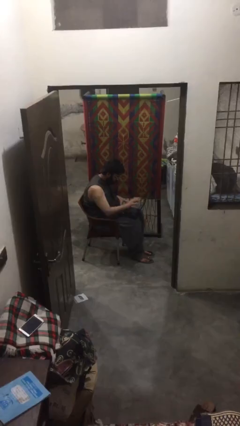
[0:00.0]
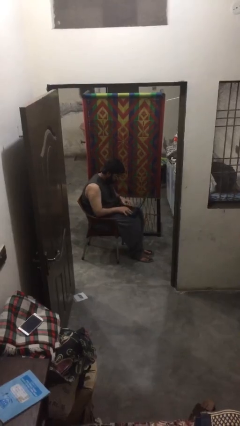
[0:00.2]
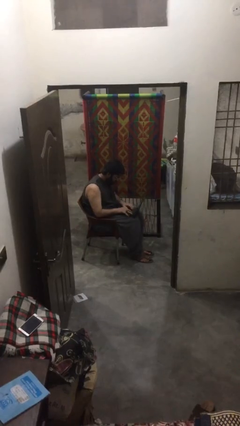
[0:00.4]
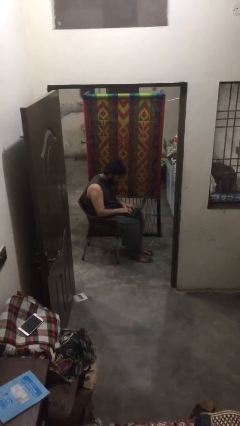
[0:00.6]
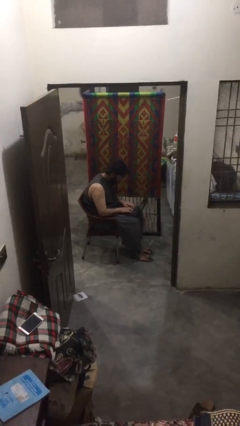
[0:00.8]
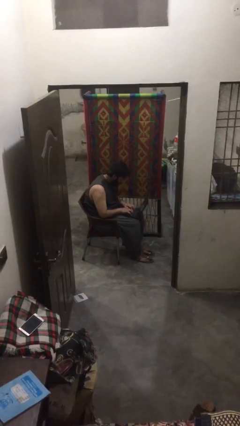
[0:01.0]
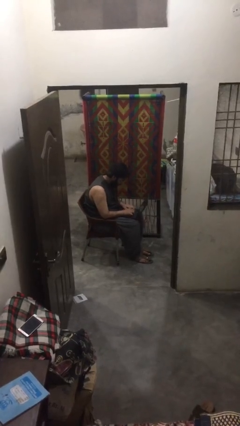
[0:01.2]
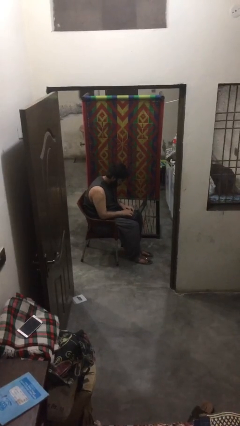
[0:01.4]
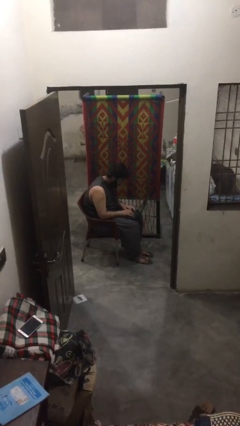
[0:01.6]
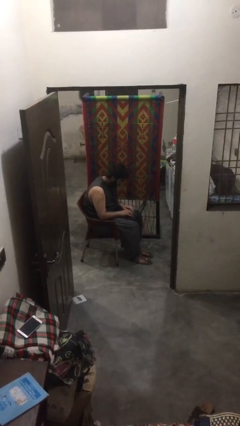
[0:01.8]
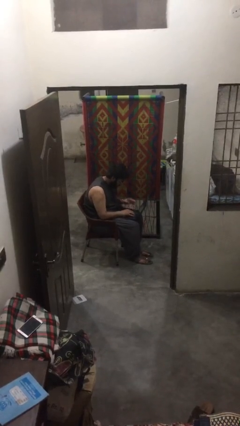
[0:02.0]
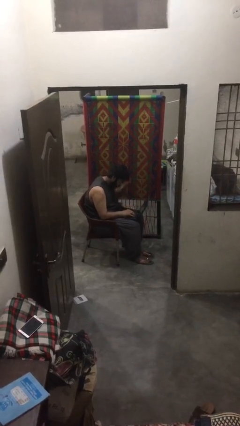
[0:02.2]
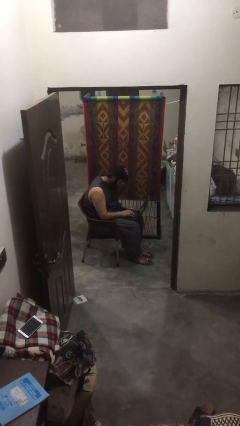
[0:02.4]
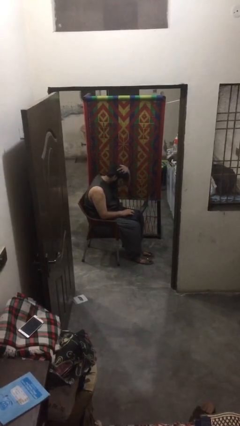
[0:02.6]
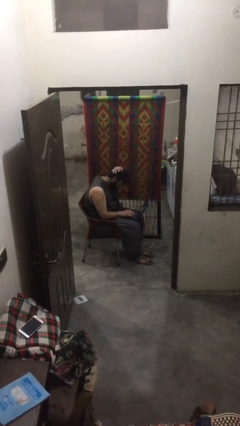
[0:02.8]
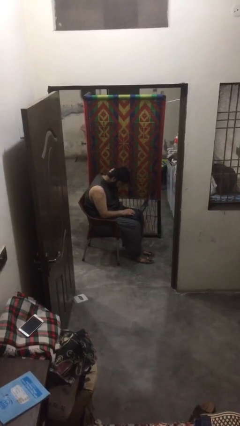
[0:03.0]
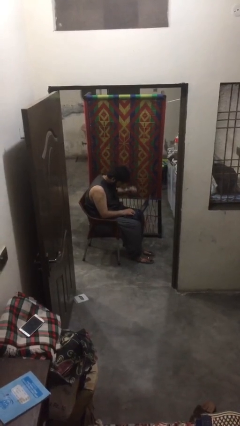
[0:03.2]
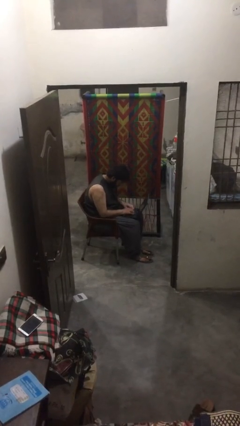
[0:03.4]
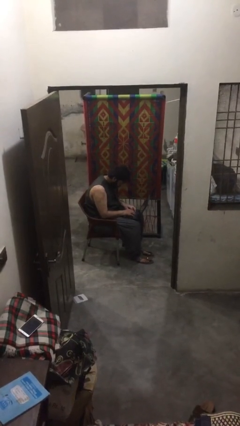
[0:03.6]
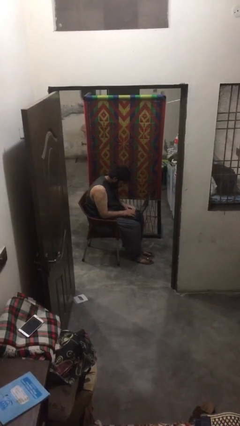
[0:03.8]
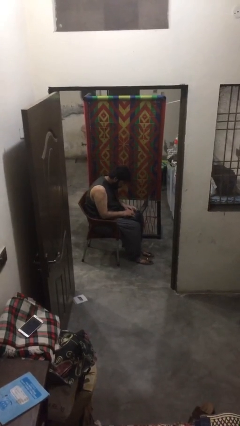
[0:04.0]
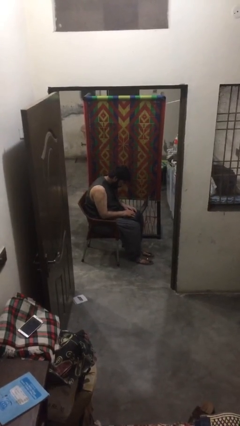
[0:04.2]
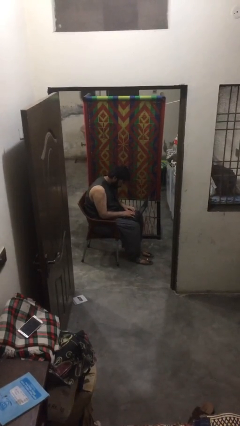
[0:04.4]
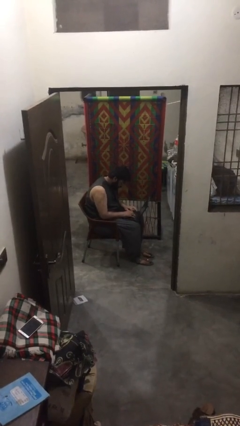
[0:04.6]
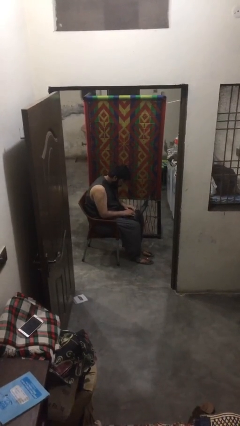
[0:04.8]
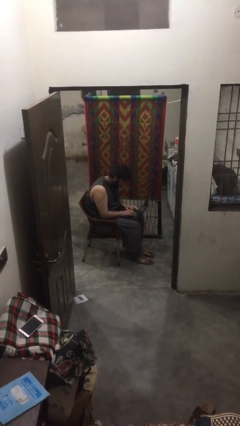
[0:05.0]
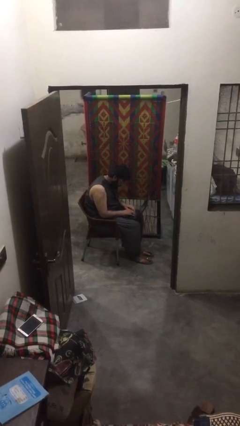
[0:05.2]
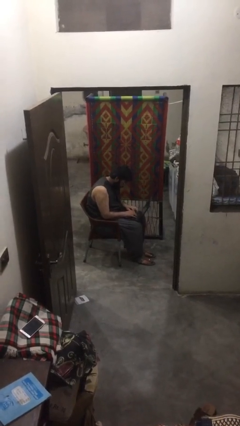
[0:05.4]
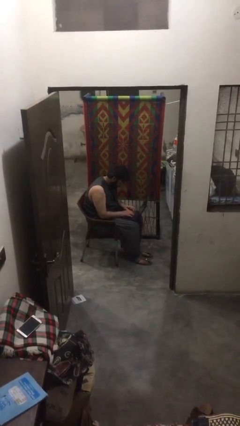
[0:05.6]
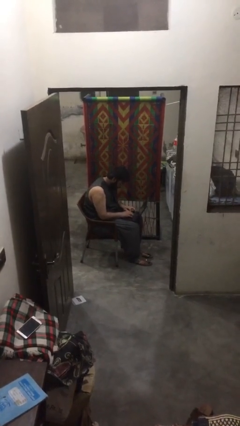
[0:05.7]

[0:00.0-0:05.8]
person interacts with laptop

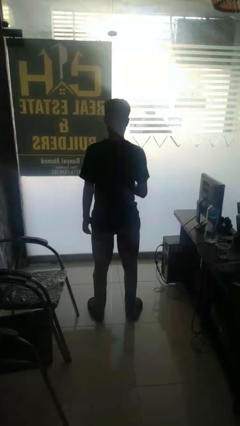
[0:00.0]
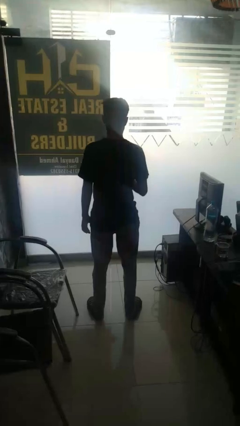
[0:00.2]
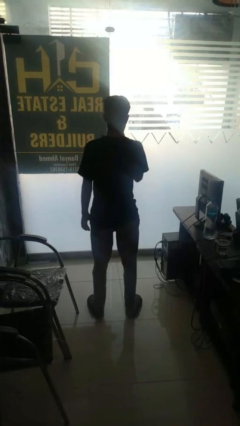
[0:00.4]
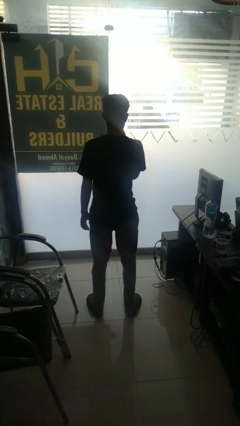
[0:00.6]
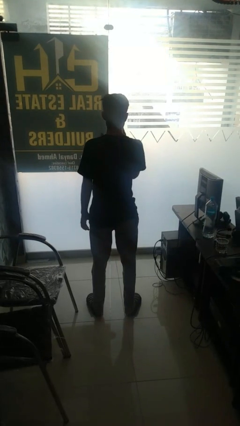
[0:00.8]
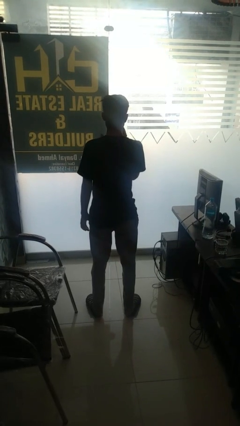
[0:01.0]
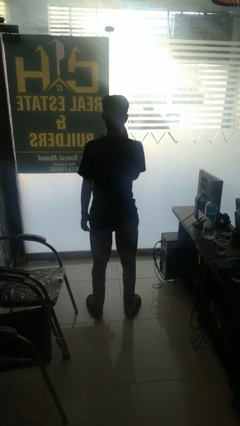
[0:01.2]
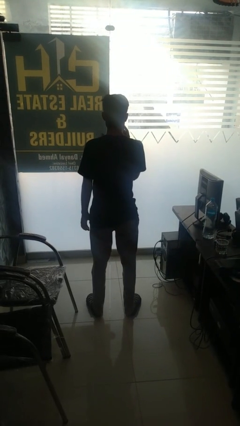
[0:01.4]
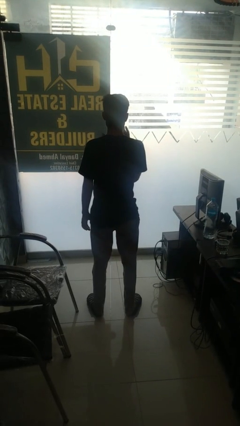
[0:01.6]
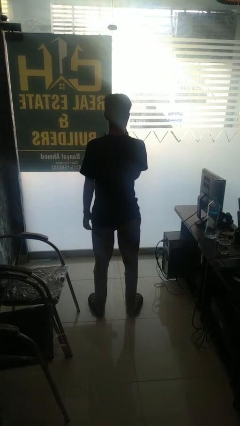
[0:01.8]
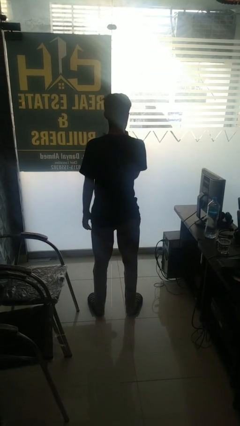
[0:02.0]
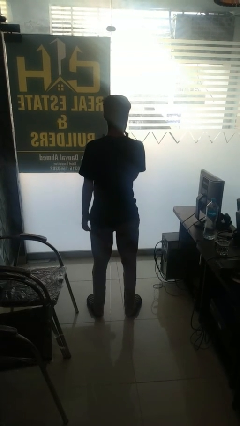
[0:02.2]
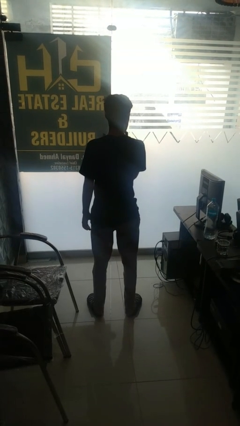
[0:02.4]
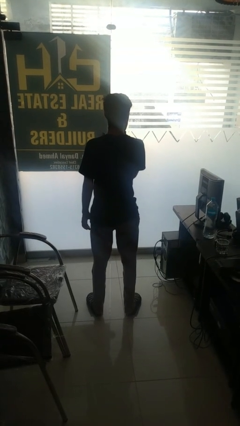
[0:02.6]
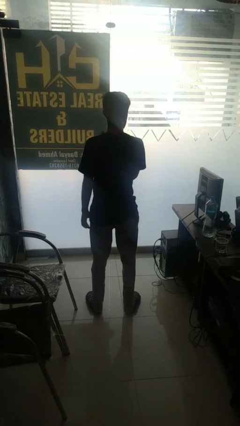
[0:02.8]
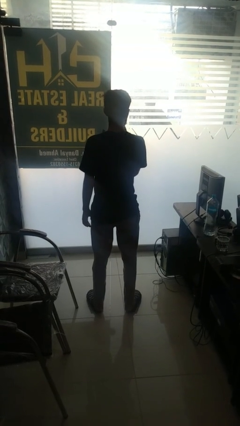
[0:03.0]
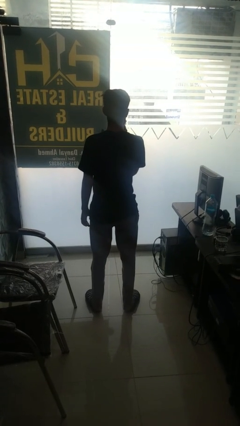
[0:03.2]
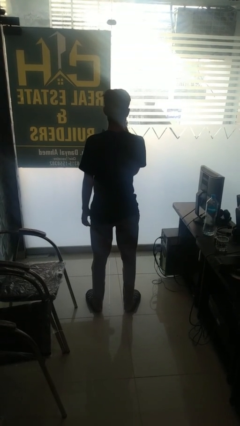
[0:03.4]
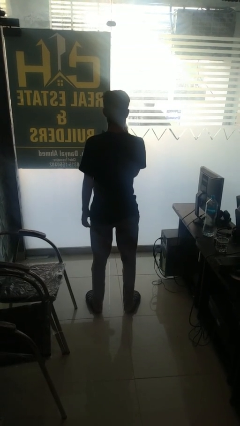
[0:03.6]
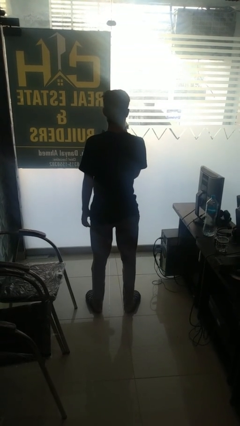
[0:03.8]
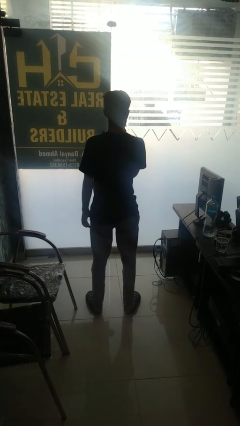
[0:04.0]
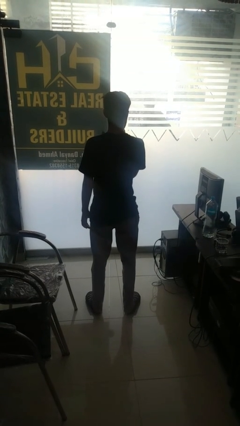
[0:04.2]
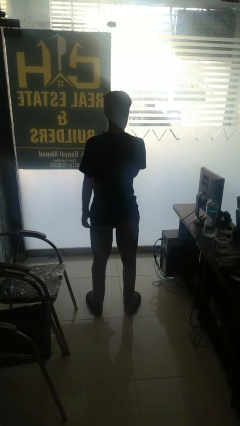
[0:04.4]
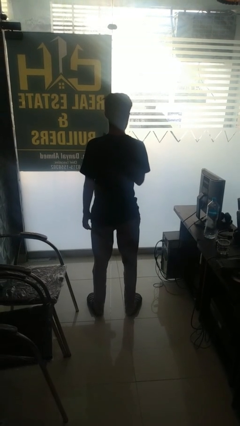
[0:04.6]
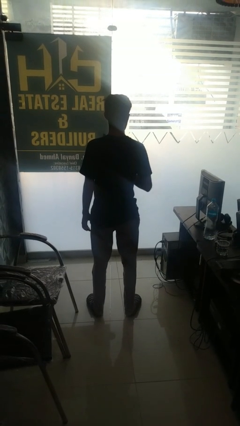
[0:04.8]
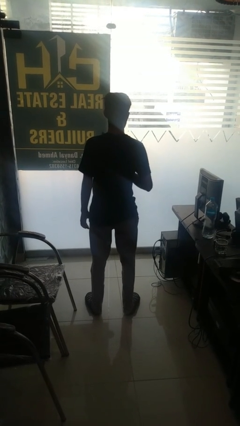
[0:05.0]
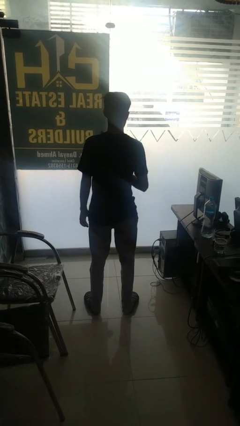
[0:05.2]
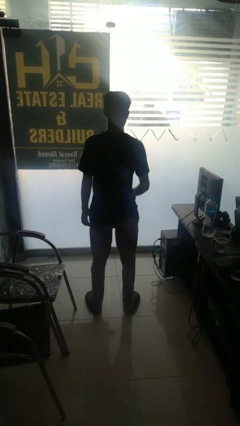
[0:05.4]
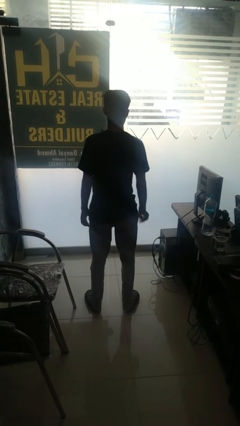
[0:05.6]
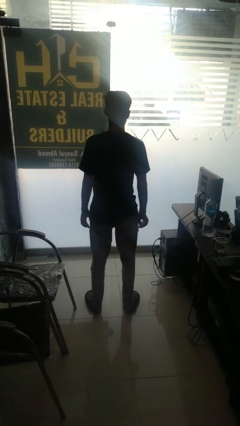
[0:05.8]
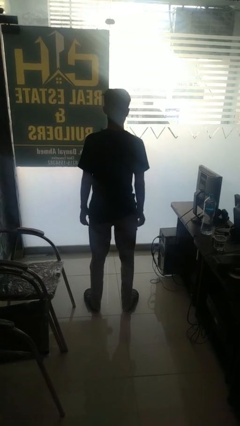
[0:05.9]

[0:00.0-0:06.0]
person wipes mouth with napkin

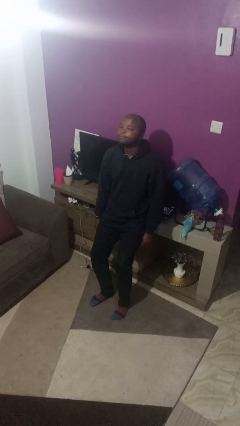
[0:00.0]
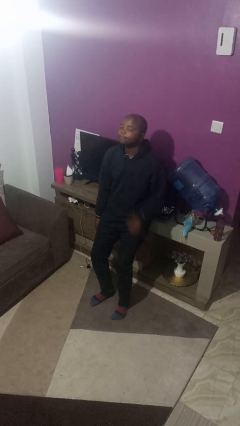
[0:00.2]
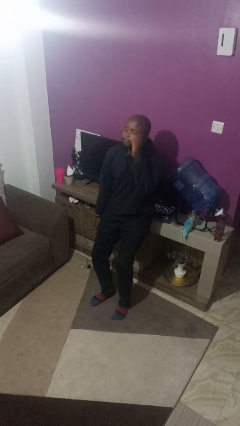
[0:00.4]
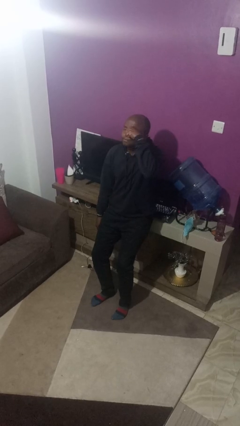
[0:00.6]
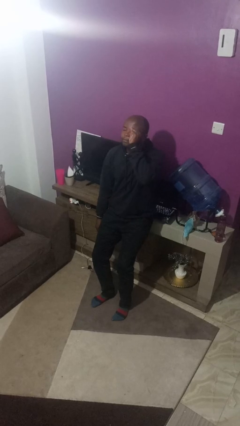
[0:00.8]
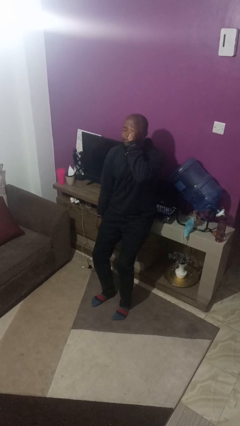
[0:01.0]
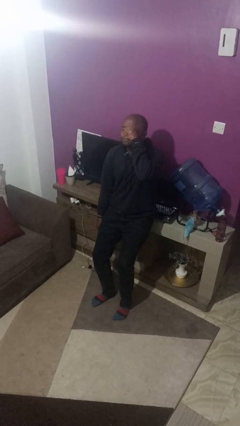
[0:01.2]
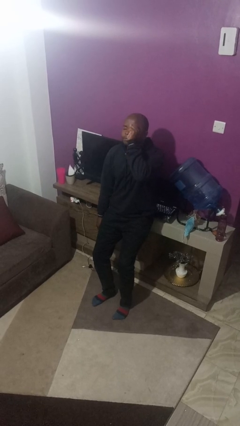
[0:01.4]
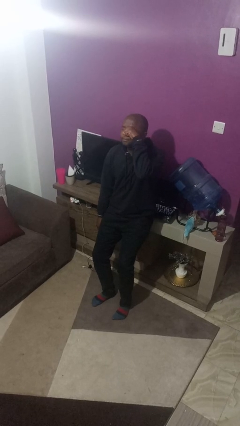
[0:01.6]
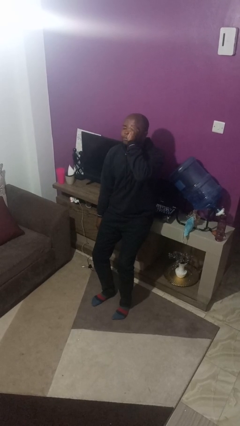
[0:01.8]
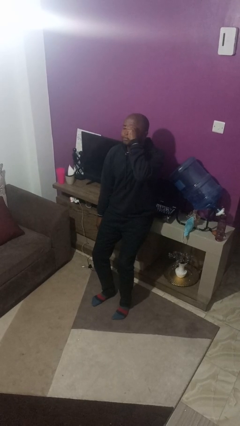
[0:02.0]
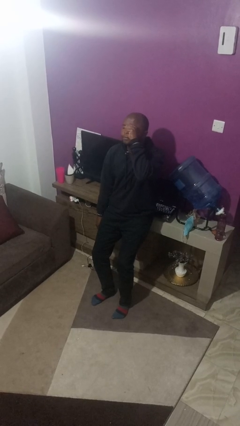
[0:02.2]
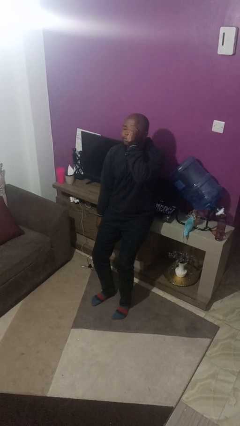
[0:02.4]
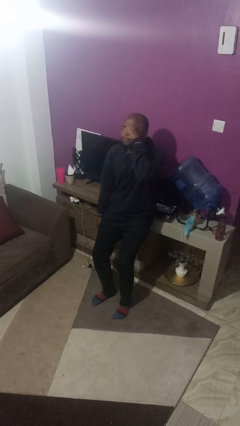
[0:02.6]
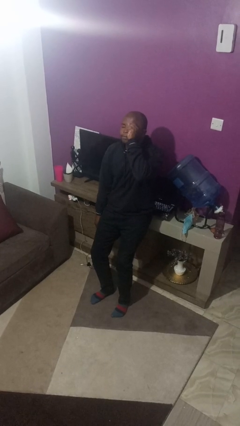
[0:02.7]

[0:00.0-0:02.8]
person rubs eyes

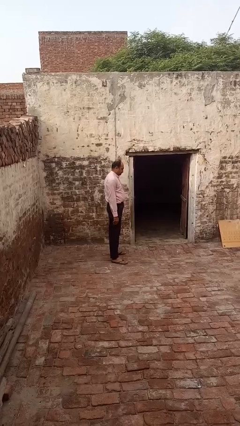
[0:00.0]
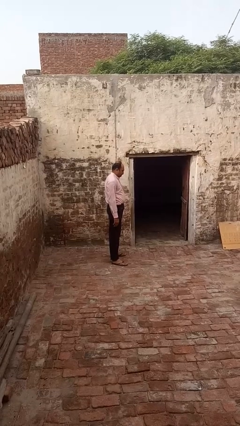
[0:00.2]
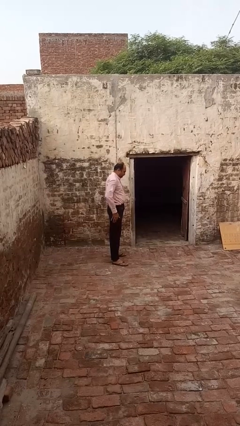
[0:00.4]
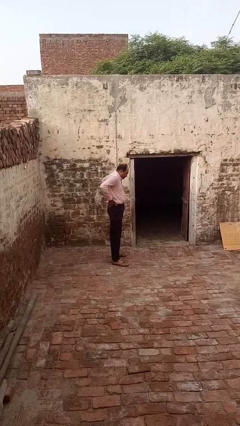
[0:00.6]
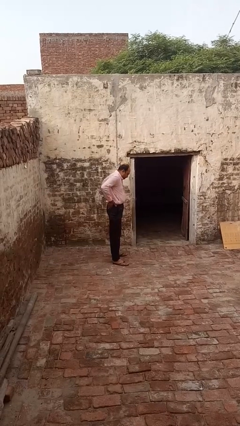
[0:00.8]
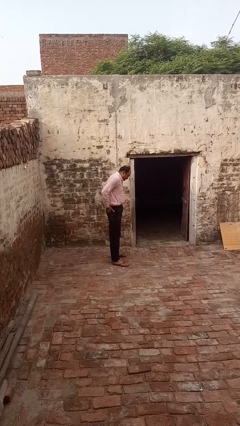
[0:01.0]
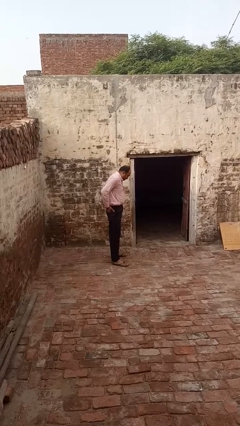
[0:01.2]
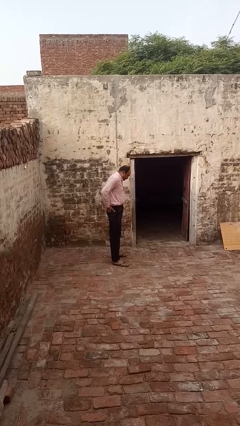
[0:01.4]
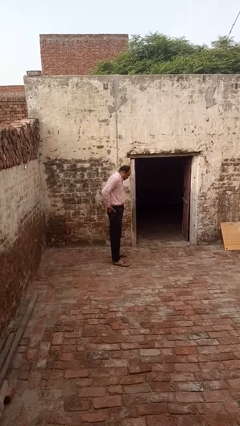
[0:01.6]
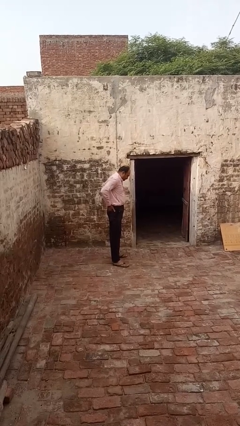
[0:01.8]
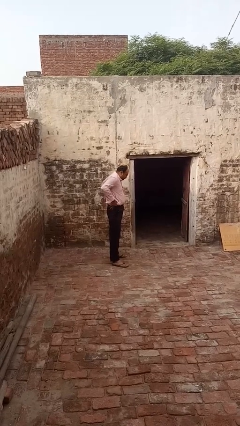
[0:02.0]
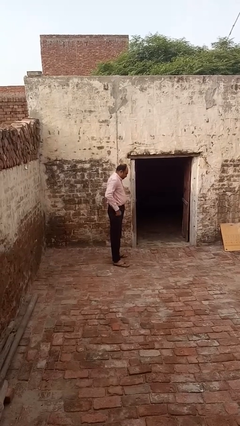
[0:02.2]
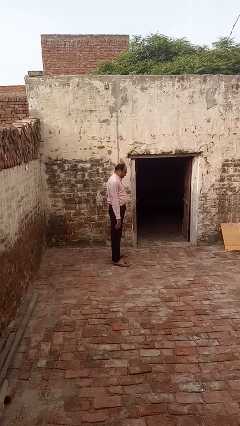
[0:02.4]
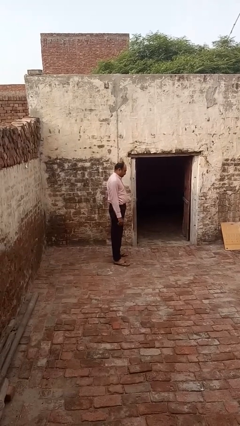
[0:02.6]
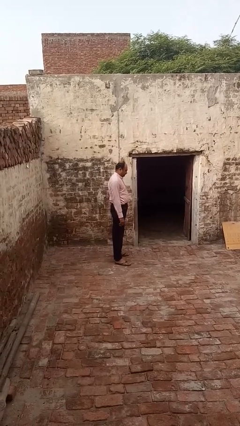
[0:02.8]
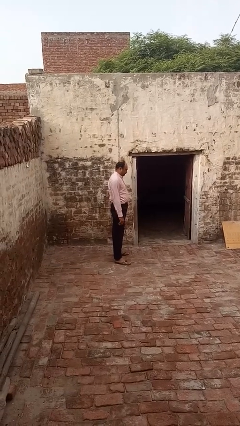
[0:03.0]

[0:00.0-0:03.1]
person puts hands in back pockets
